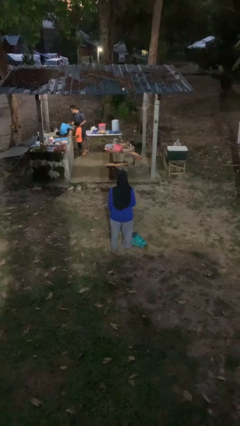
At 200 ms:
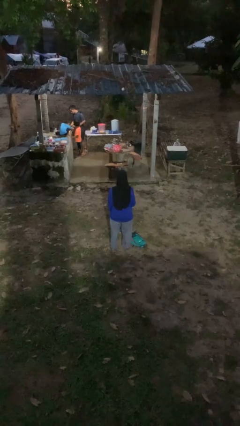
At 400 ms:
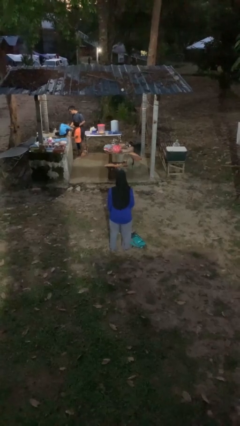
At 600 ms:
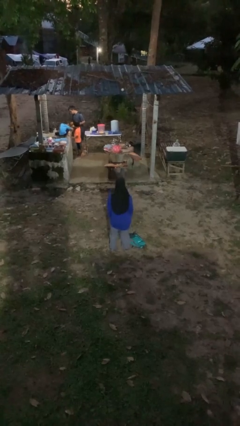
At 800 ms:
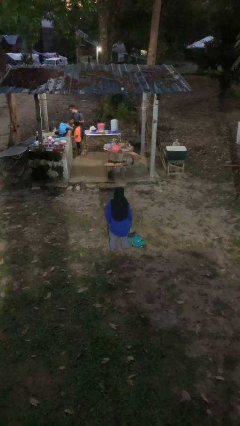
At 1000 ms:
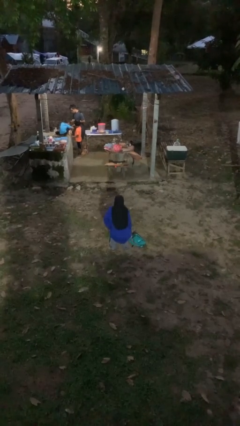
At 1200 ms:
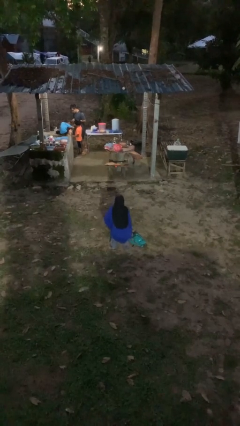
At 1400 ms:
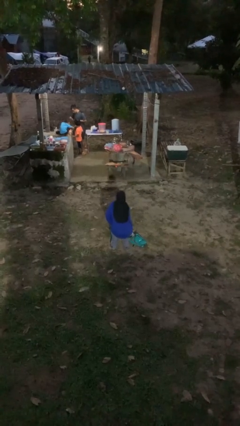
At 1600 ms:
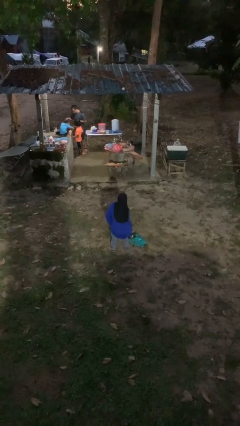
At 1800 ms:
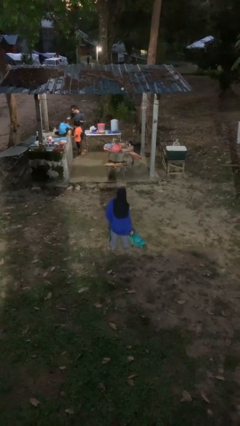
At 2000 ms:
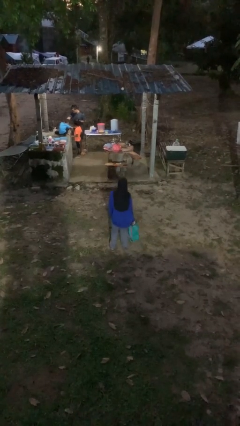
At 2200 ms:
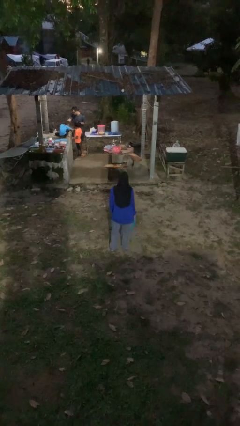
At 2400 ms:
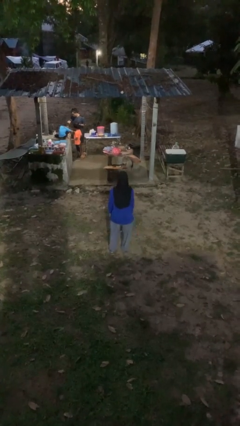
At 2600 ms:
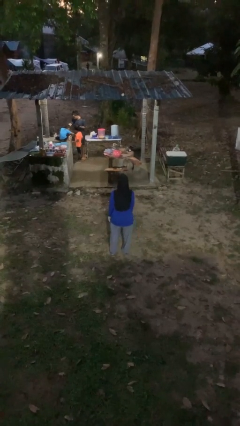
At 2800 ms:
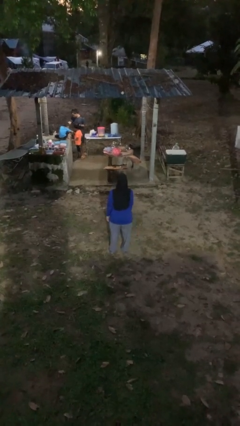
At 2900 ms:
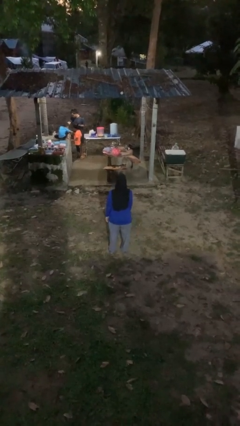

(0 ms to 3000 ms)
person picks up object from floor

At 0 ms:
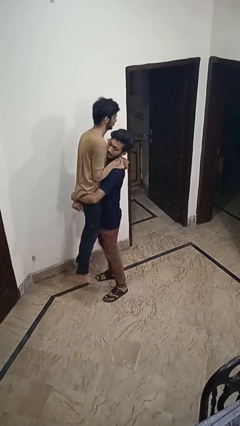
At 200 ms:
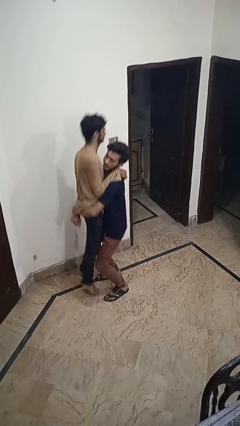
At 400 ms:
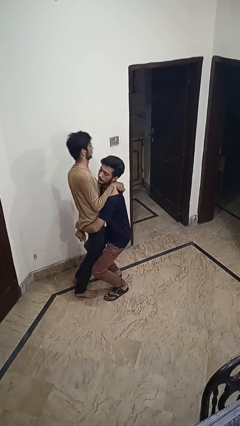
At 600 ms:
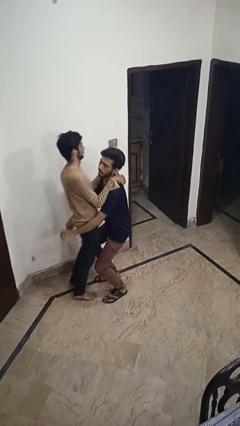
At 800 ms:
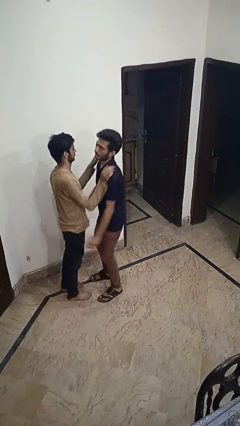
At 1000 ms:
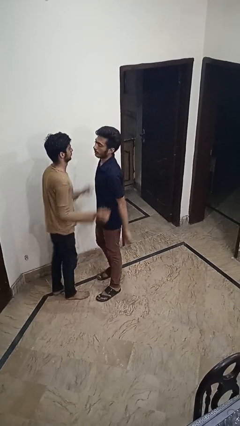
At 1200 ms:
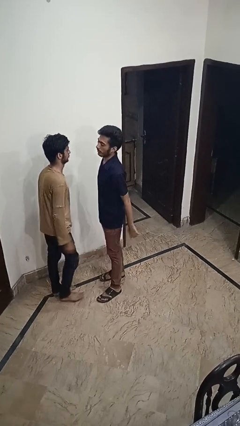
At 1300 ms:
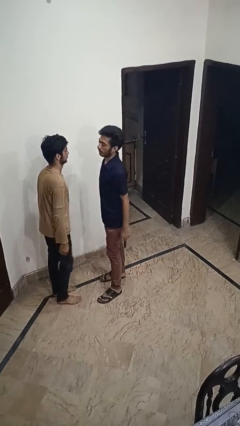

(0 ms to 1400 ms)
person puts down person

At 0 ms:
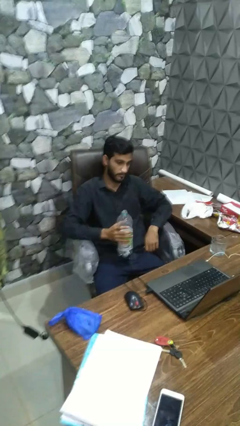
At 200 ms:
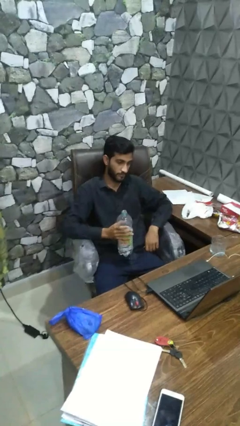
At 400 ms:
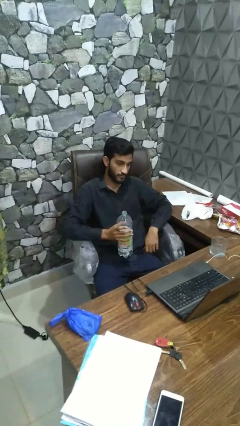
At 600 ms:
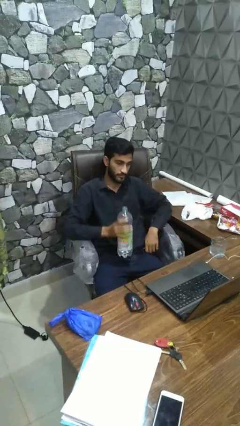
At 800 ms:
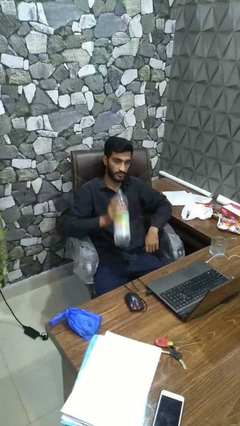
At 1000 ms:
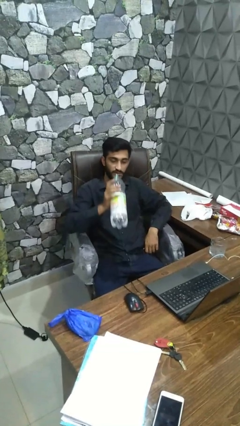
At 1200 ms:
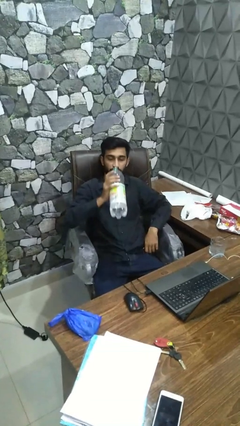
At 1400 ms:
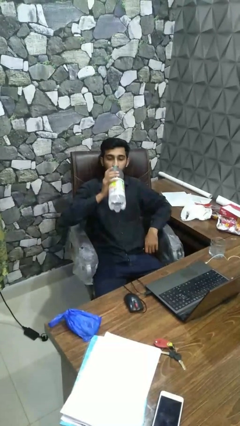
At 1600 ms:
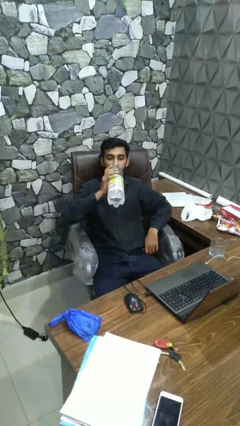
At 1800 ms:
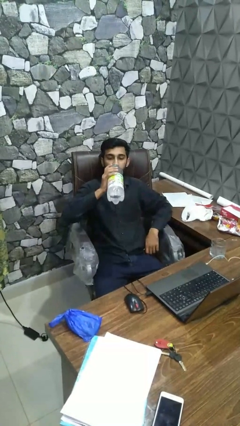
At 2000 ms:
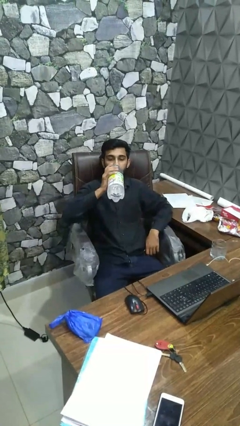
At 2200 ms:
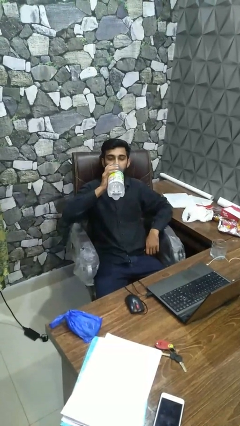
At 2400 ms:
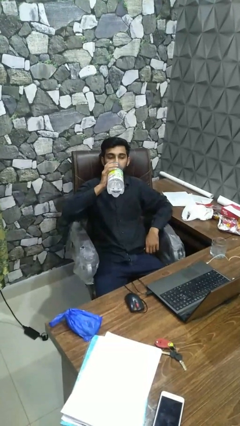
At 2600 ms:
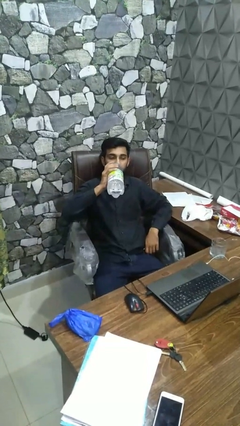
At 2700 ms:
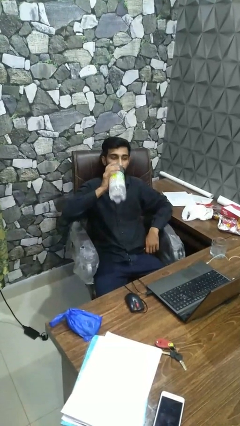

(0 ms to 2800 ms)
person drinks from bottle

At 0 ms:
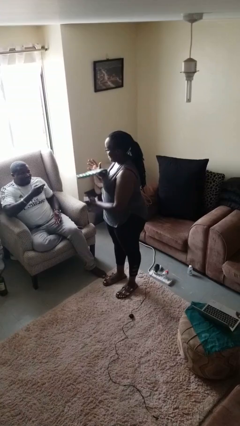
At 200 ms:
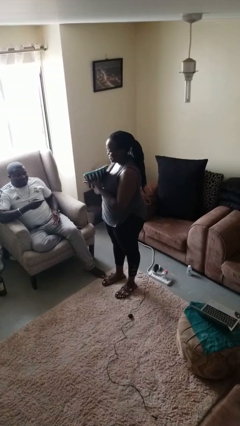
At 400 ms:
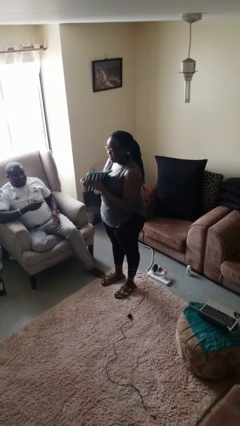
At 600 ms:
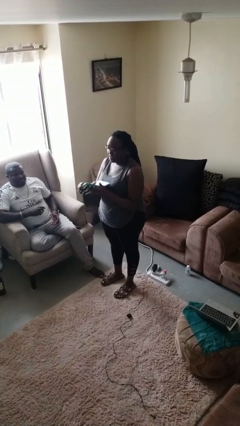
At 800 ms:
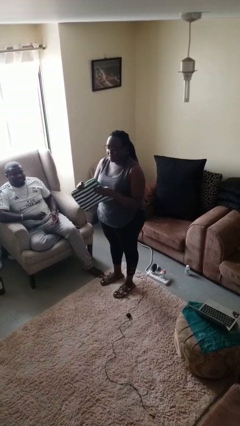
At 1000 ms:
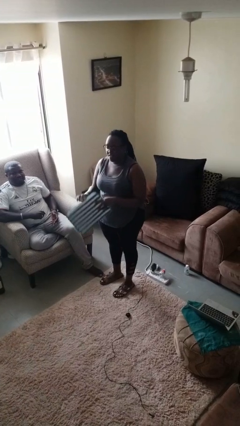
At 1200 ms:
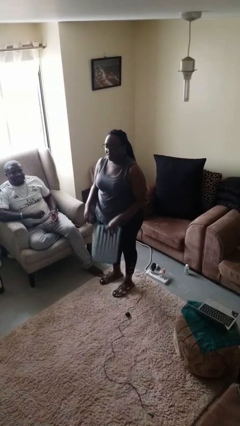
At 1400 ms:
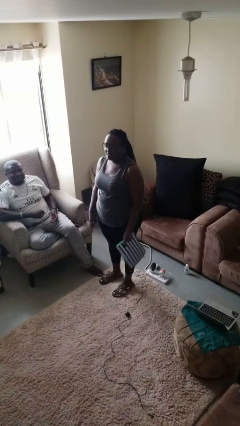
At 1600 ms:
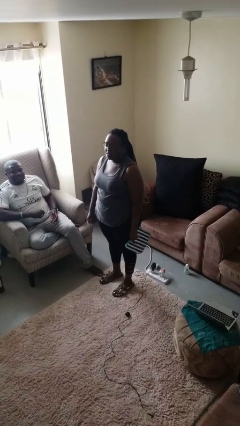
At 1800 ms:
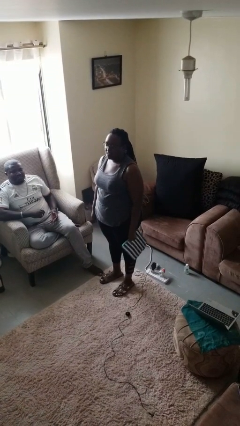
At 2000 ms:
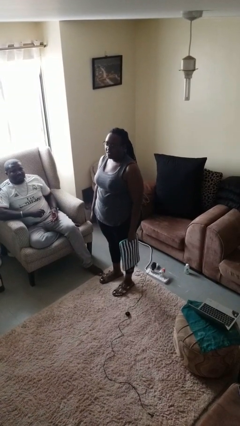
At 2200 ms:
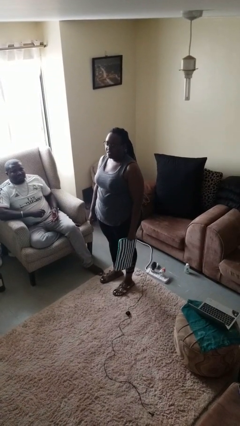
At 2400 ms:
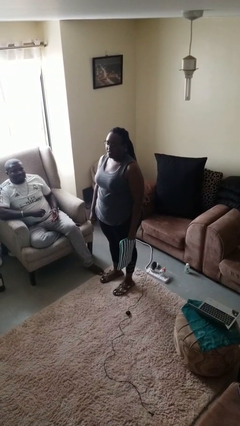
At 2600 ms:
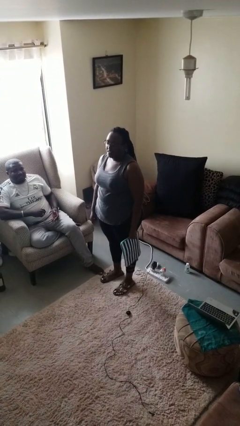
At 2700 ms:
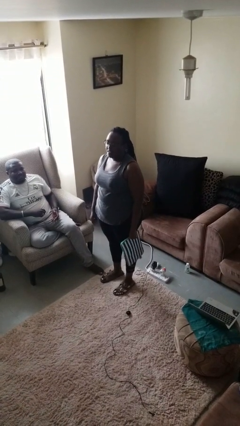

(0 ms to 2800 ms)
person catches object from person

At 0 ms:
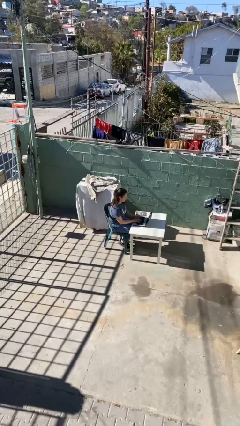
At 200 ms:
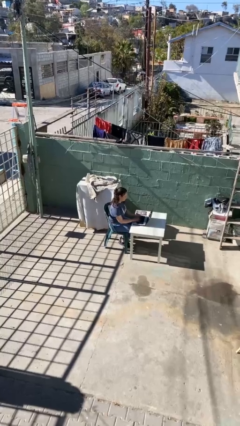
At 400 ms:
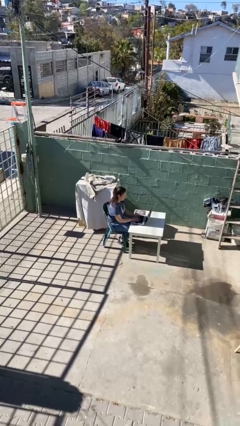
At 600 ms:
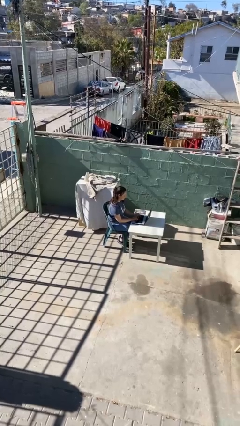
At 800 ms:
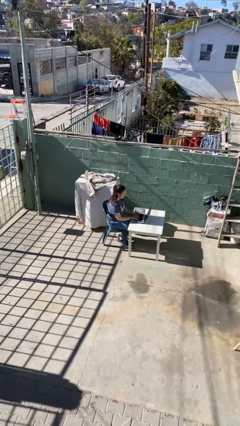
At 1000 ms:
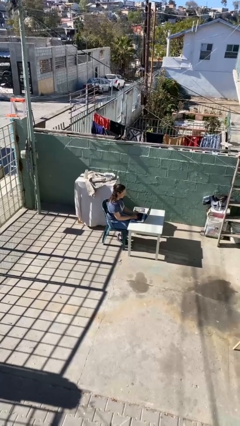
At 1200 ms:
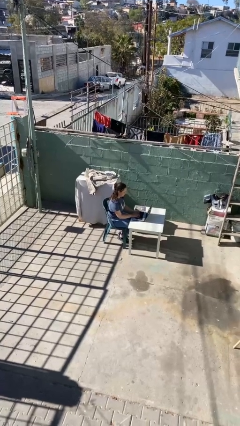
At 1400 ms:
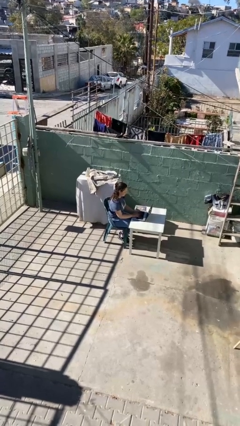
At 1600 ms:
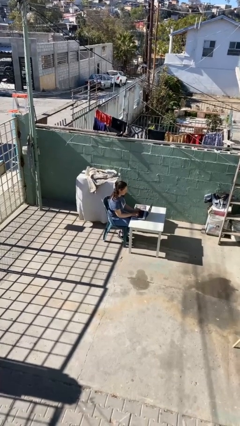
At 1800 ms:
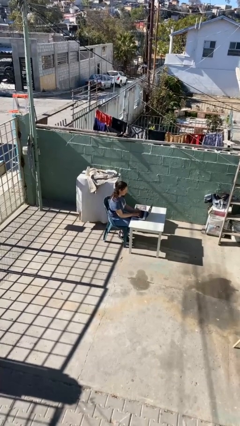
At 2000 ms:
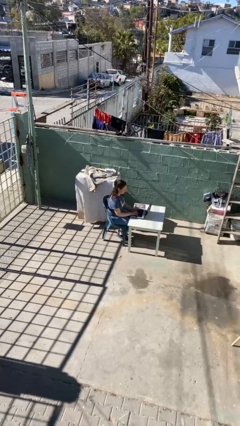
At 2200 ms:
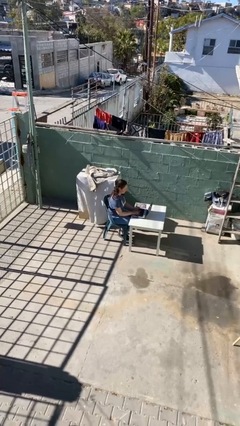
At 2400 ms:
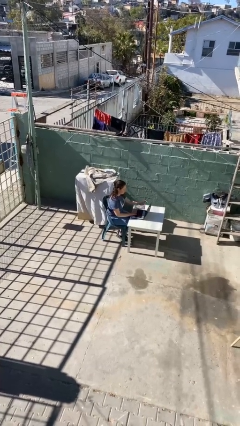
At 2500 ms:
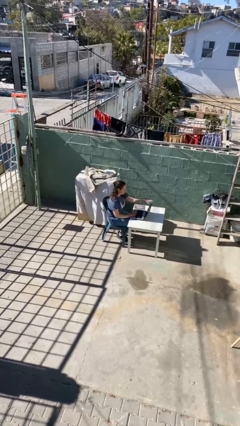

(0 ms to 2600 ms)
person interacts with laptop

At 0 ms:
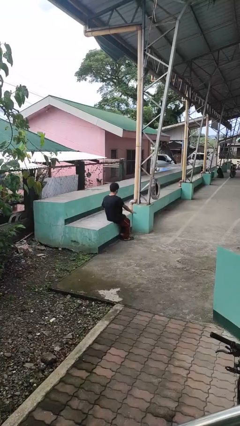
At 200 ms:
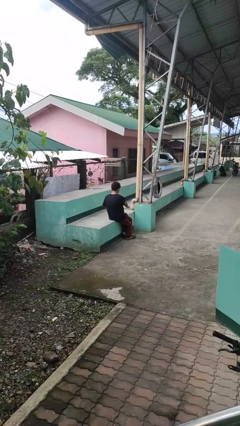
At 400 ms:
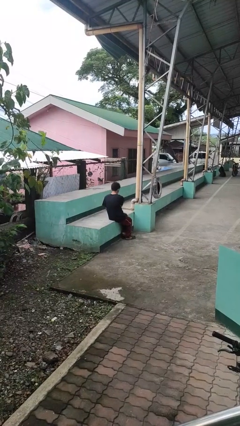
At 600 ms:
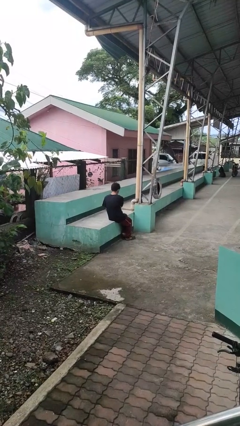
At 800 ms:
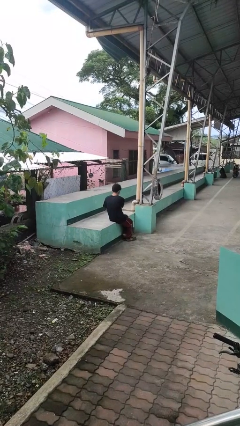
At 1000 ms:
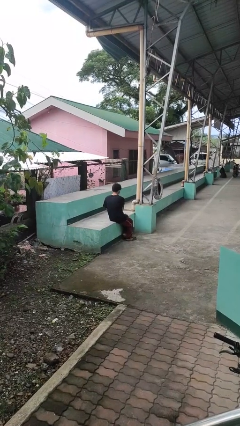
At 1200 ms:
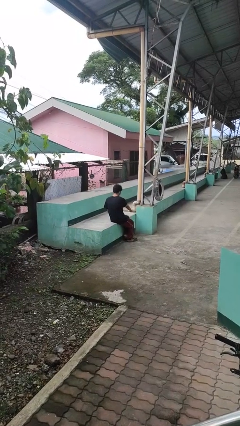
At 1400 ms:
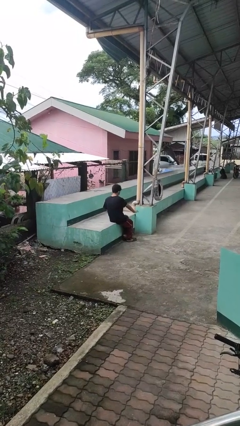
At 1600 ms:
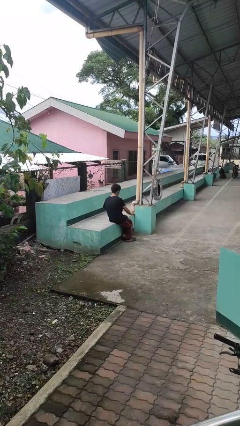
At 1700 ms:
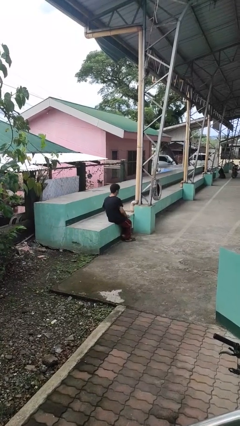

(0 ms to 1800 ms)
person waves hand over object

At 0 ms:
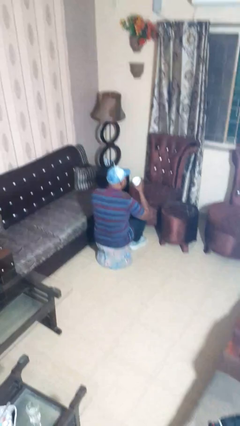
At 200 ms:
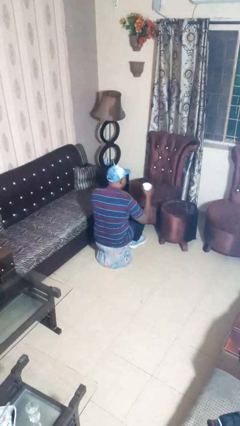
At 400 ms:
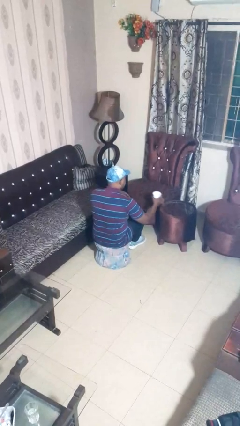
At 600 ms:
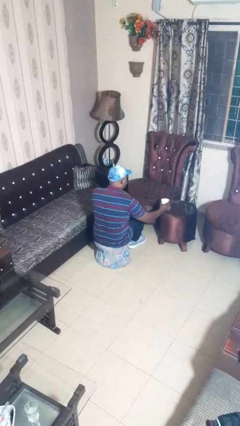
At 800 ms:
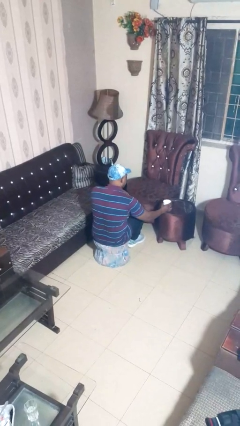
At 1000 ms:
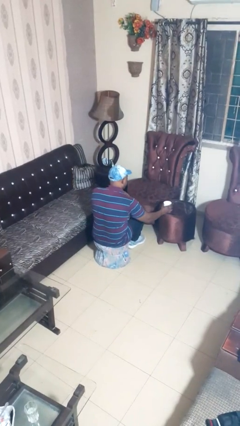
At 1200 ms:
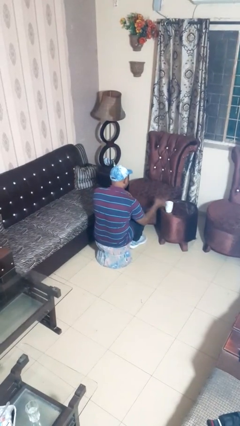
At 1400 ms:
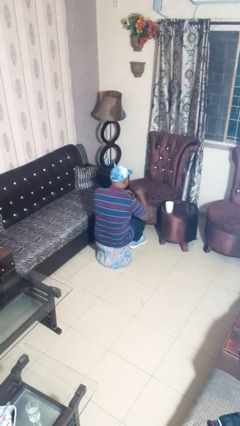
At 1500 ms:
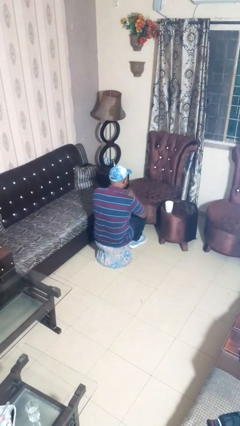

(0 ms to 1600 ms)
person puts down object on table

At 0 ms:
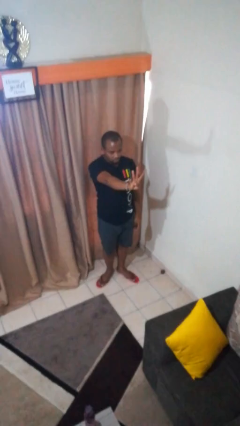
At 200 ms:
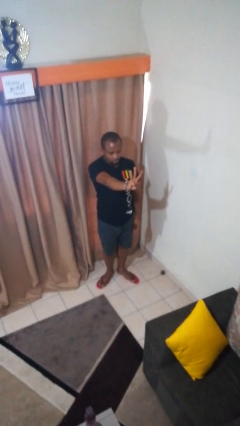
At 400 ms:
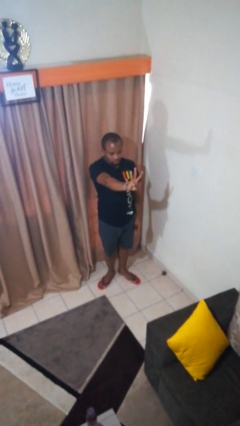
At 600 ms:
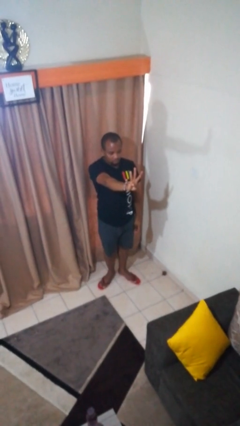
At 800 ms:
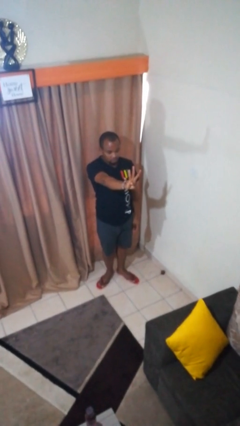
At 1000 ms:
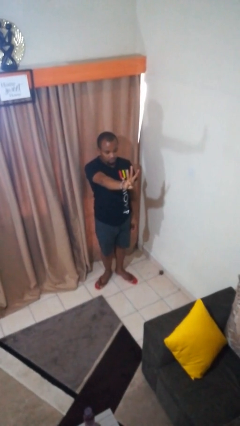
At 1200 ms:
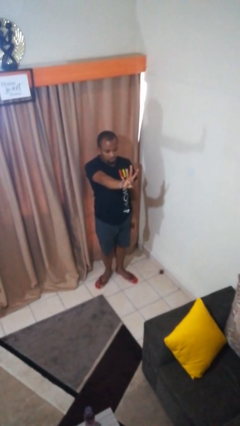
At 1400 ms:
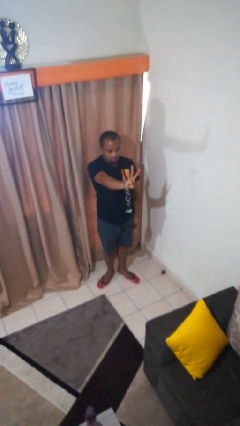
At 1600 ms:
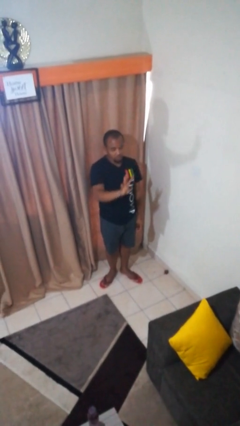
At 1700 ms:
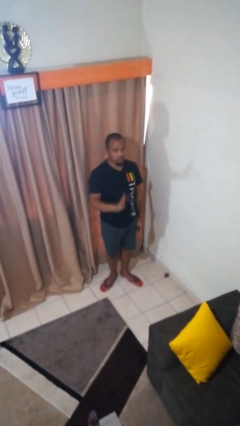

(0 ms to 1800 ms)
person gestures number four
